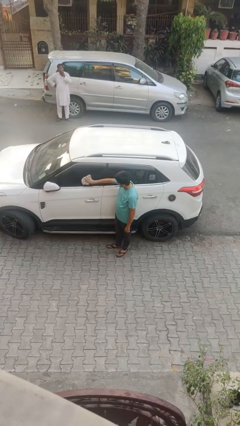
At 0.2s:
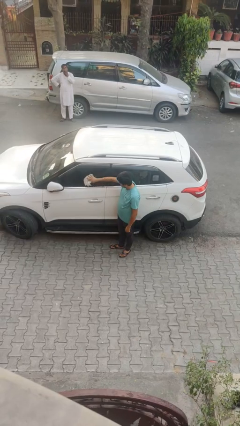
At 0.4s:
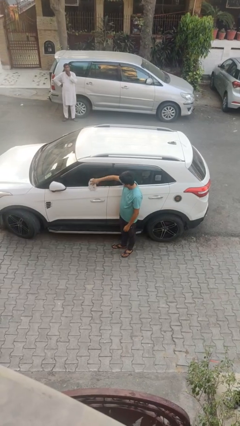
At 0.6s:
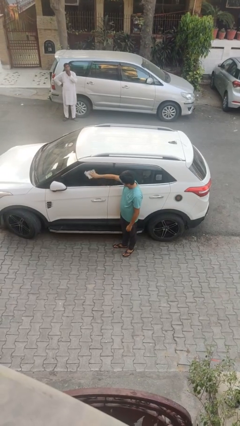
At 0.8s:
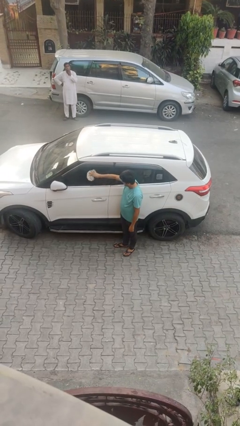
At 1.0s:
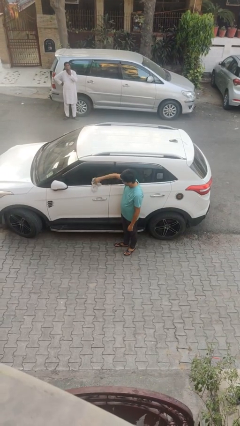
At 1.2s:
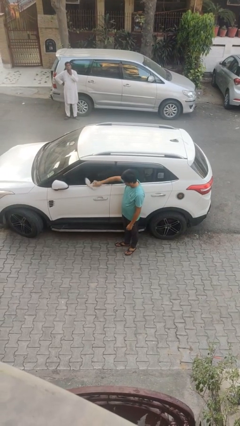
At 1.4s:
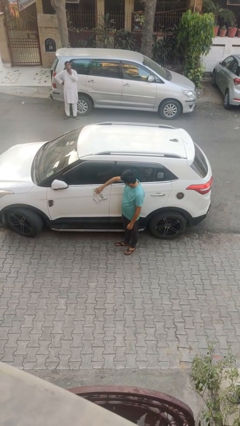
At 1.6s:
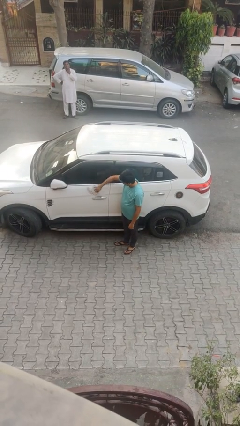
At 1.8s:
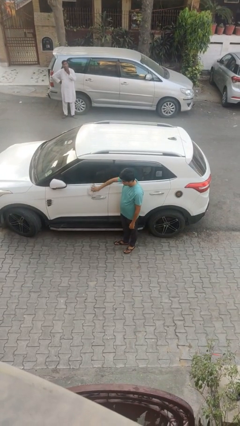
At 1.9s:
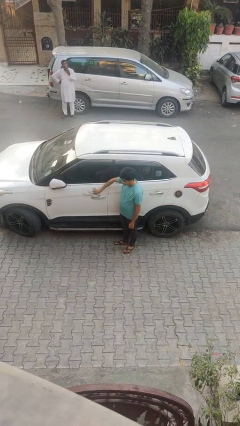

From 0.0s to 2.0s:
person polishes car with rag

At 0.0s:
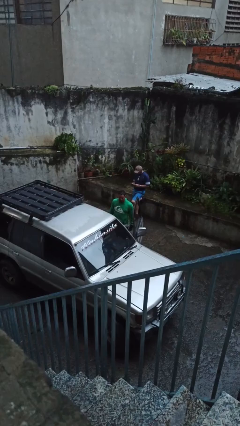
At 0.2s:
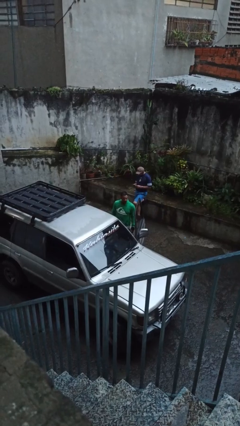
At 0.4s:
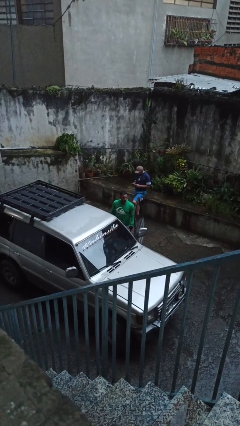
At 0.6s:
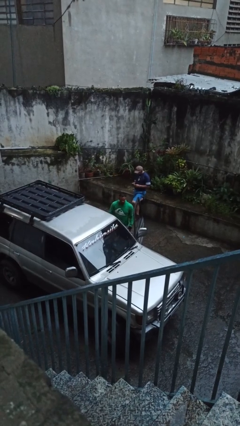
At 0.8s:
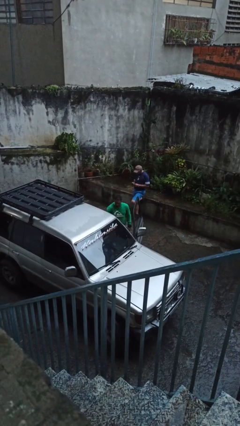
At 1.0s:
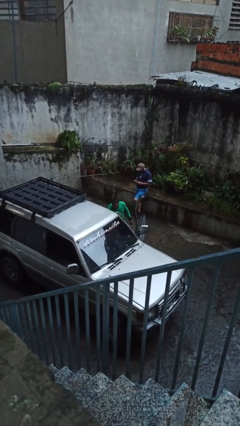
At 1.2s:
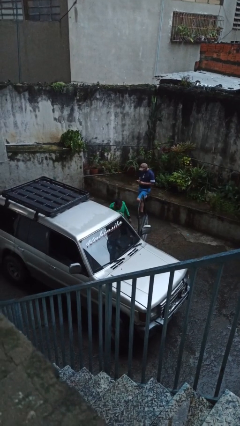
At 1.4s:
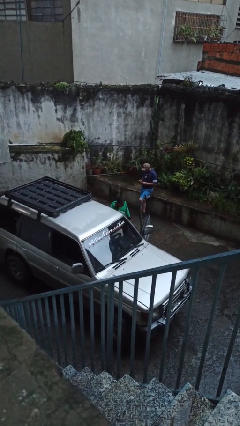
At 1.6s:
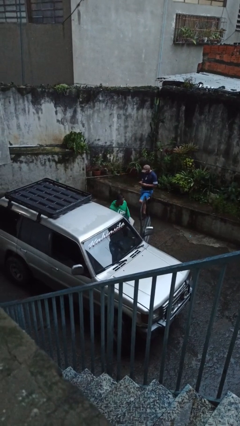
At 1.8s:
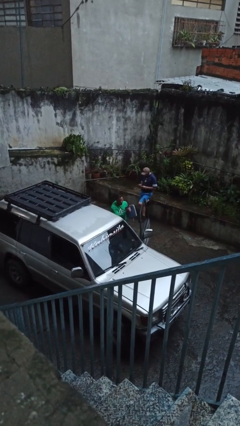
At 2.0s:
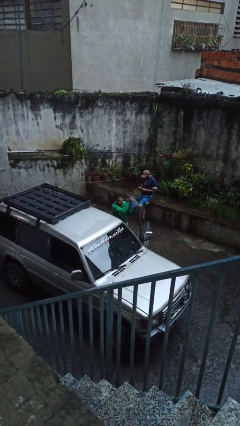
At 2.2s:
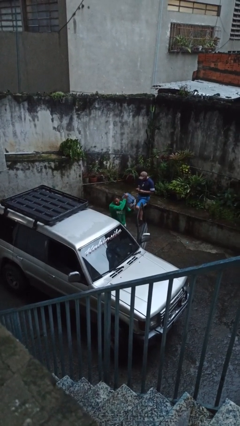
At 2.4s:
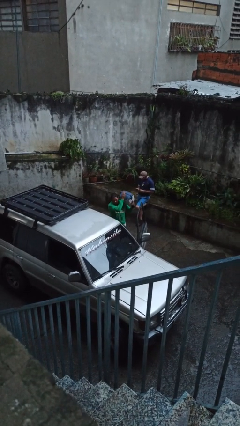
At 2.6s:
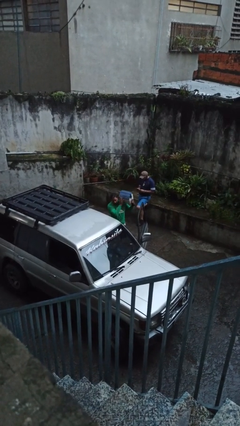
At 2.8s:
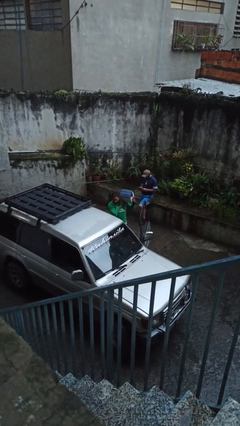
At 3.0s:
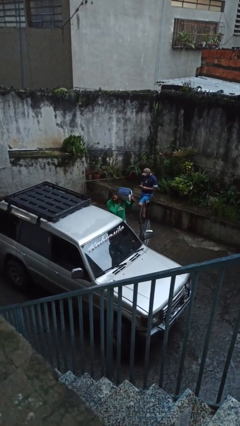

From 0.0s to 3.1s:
person unloads car

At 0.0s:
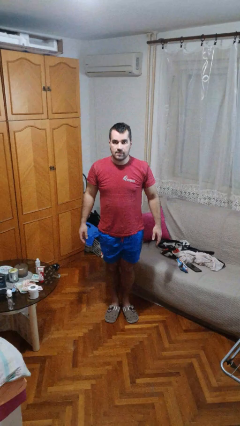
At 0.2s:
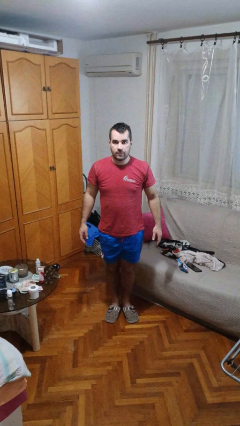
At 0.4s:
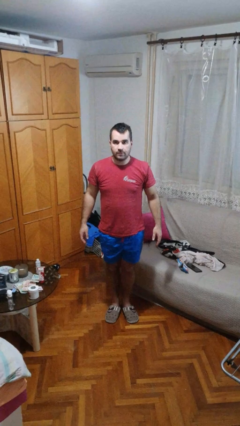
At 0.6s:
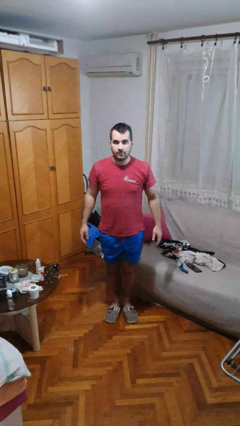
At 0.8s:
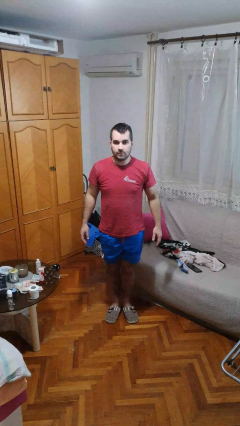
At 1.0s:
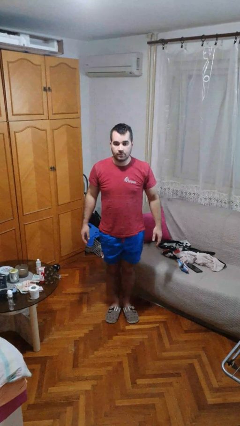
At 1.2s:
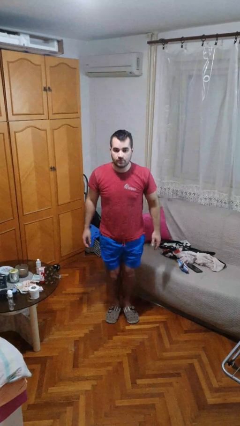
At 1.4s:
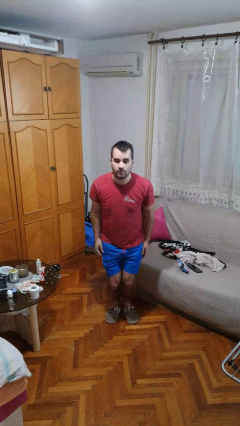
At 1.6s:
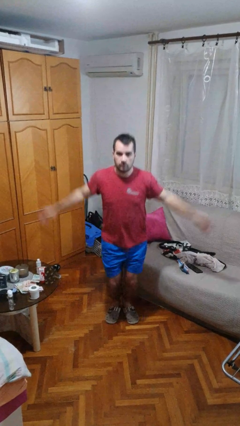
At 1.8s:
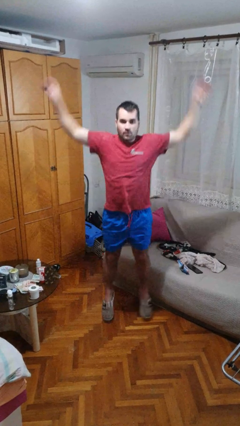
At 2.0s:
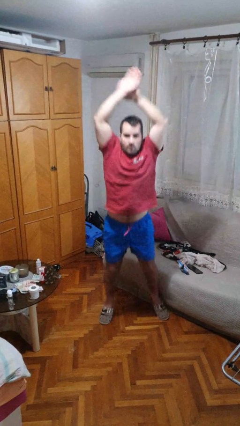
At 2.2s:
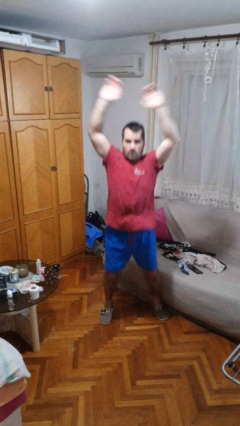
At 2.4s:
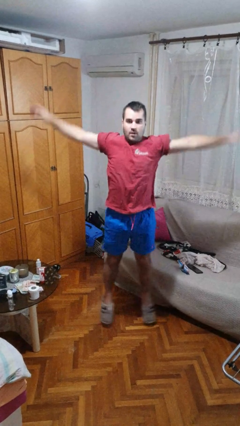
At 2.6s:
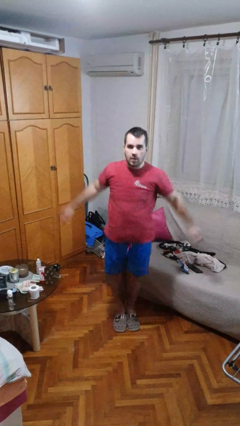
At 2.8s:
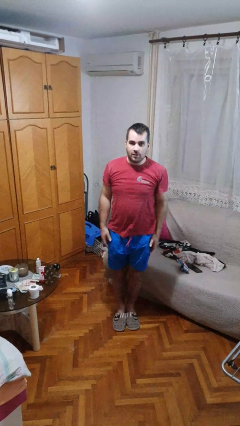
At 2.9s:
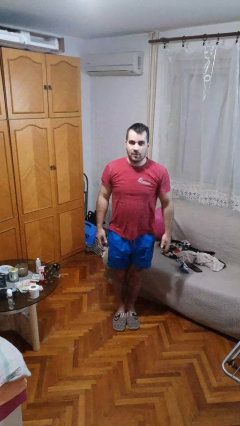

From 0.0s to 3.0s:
person exercises with jumping jacks

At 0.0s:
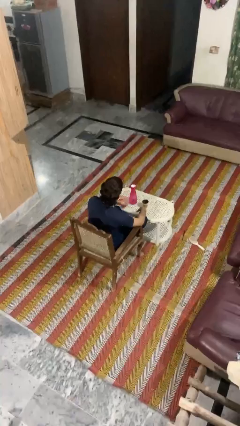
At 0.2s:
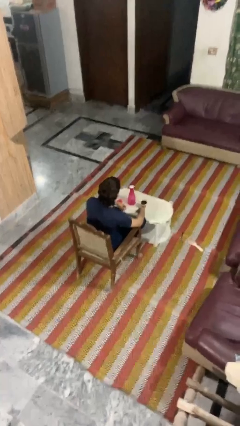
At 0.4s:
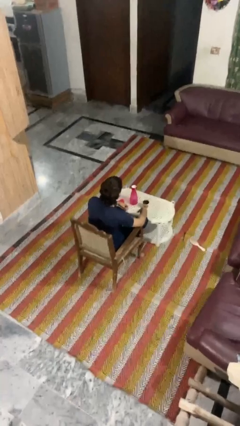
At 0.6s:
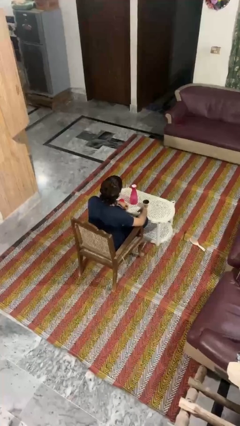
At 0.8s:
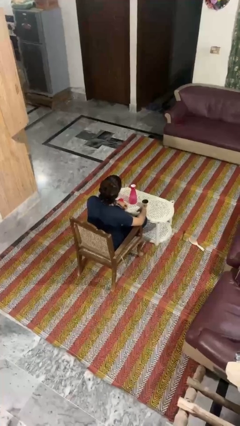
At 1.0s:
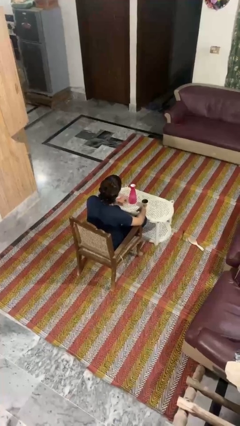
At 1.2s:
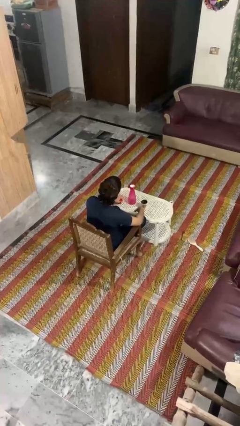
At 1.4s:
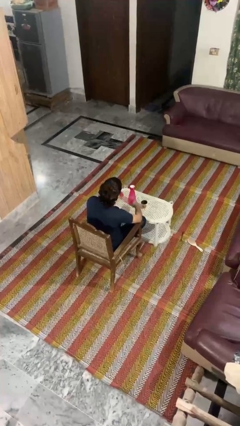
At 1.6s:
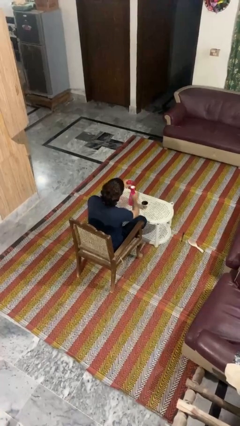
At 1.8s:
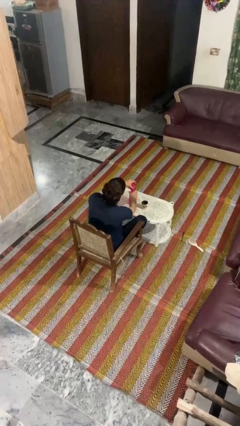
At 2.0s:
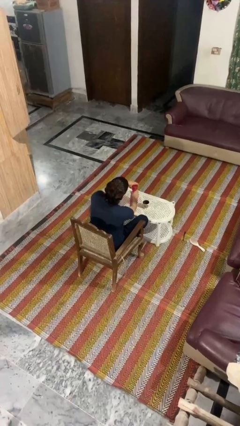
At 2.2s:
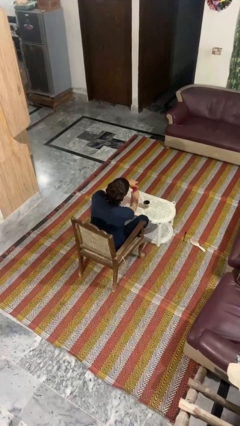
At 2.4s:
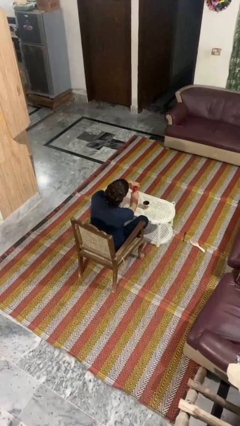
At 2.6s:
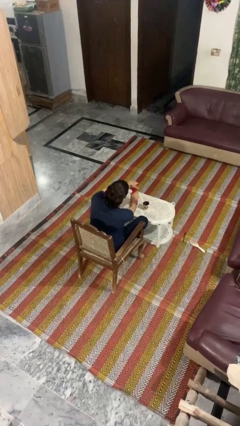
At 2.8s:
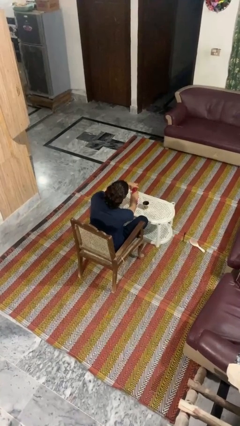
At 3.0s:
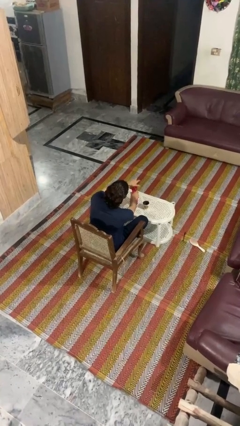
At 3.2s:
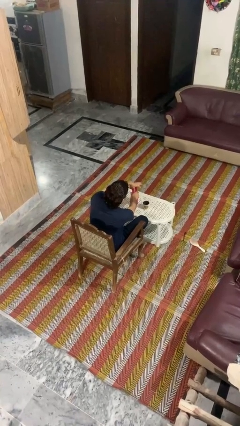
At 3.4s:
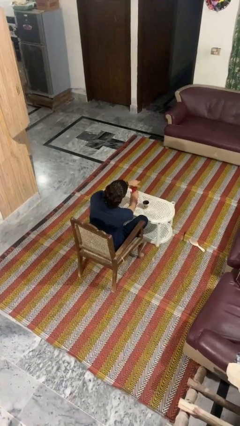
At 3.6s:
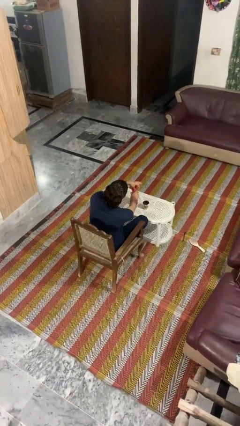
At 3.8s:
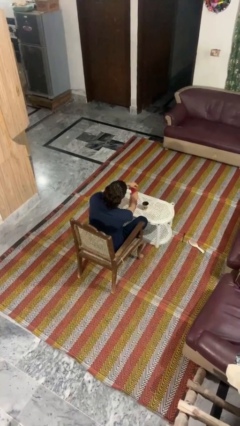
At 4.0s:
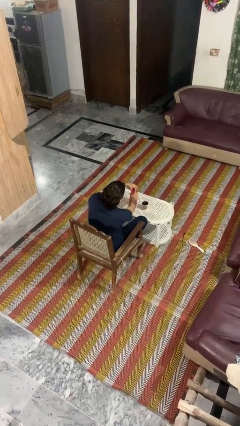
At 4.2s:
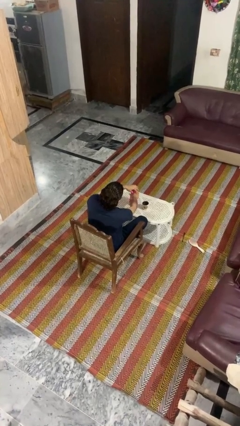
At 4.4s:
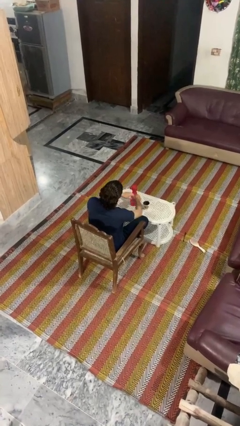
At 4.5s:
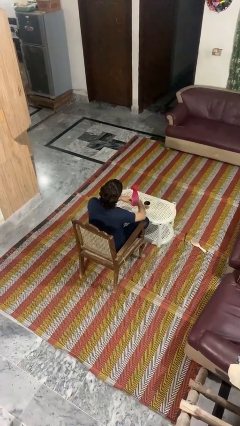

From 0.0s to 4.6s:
person screws lid to bottle

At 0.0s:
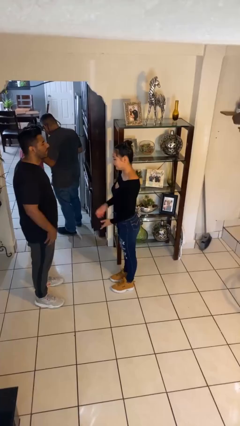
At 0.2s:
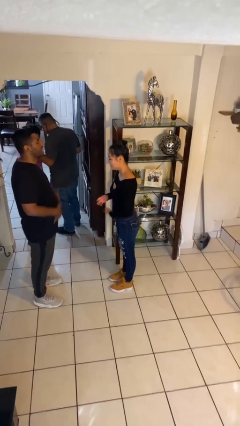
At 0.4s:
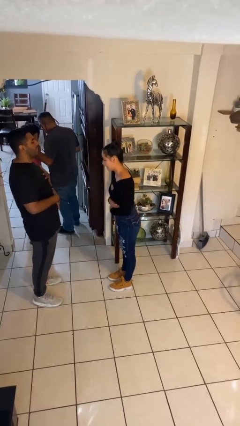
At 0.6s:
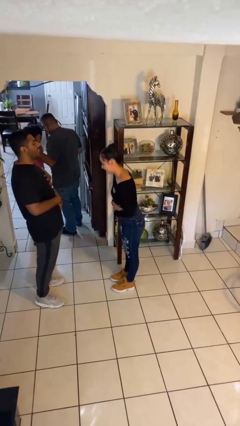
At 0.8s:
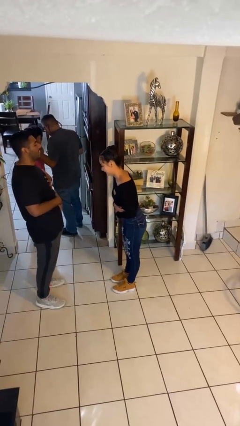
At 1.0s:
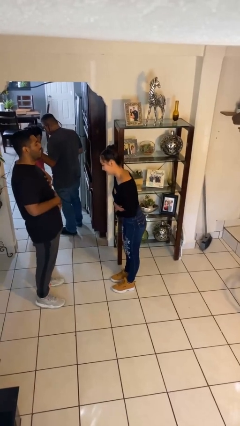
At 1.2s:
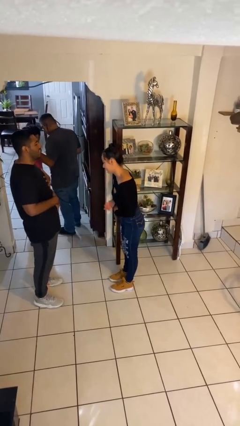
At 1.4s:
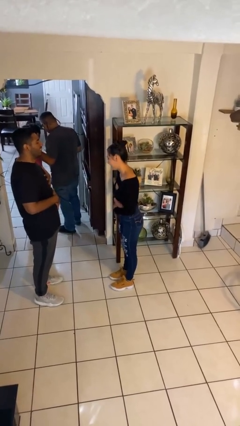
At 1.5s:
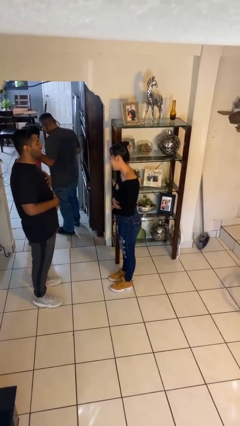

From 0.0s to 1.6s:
person laughs with person

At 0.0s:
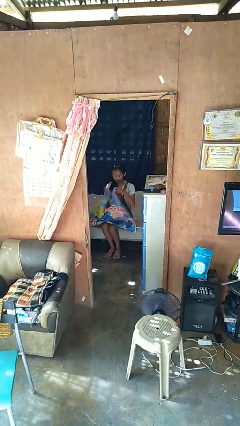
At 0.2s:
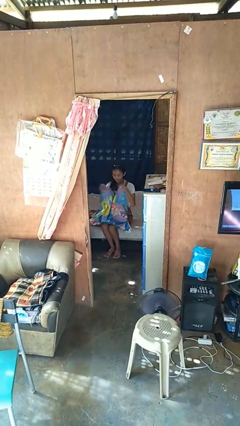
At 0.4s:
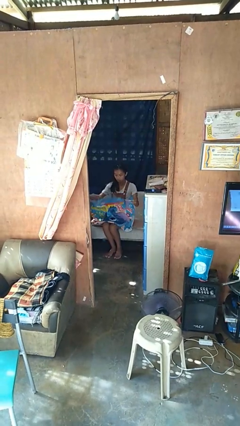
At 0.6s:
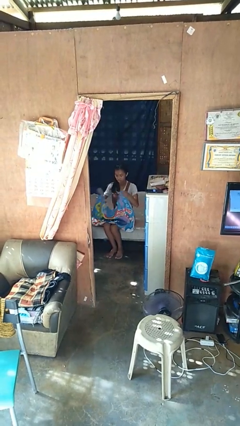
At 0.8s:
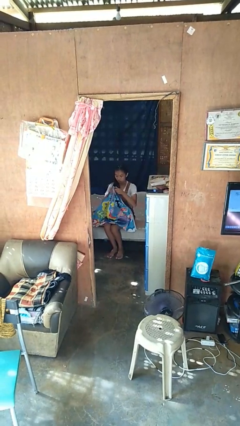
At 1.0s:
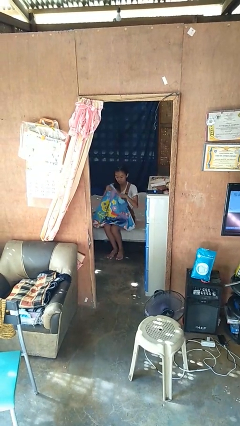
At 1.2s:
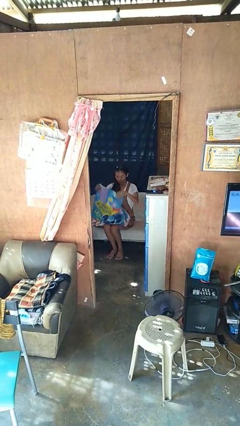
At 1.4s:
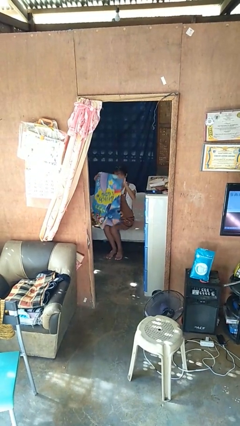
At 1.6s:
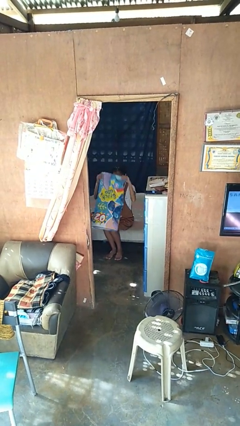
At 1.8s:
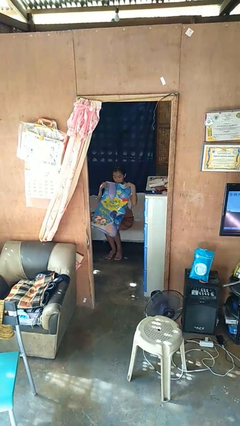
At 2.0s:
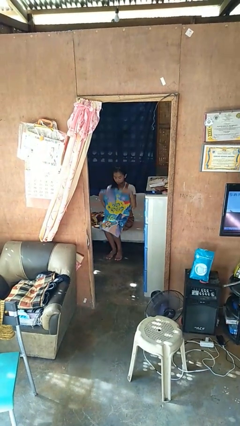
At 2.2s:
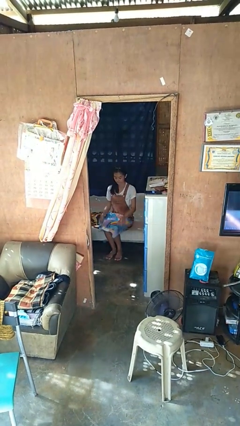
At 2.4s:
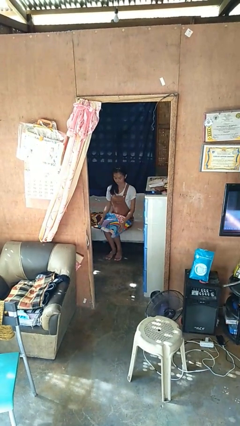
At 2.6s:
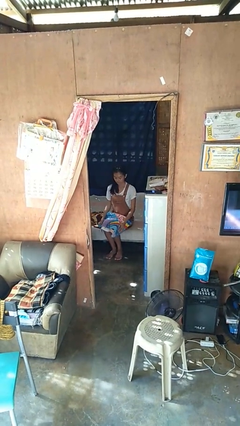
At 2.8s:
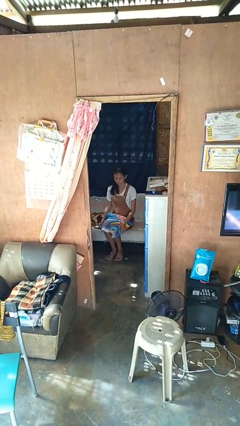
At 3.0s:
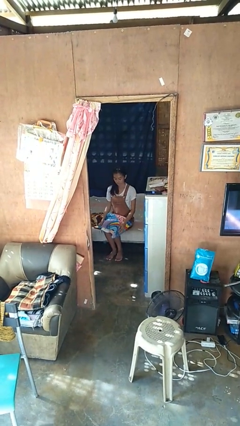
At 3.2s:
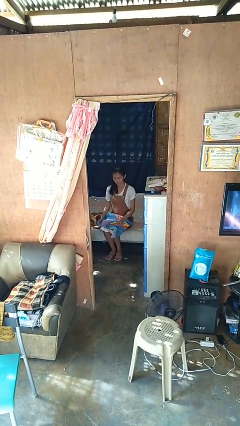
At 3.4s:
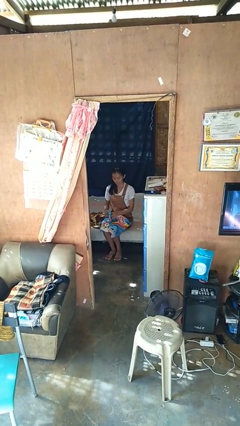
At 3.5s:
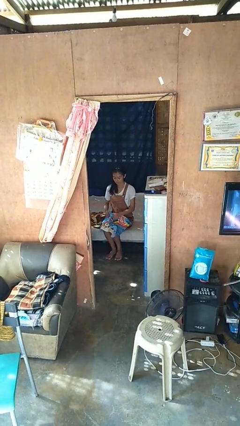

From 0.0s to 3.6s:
person folds blanket
